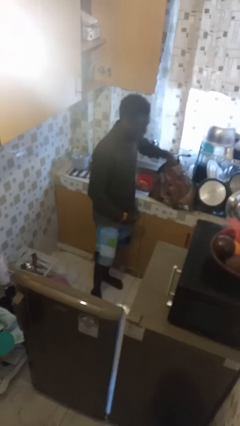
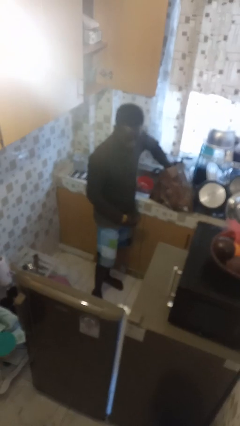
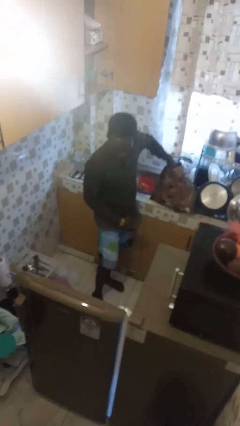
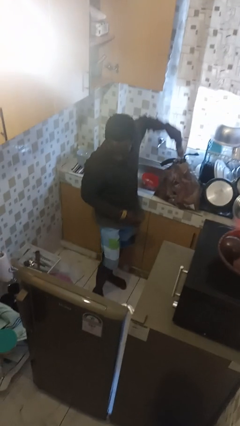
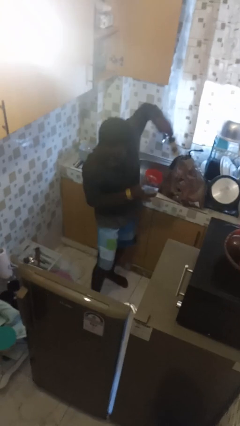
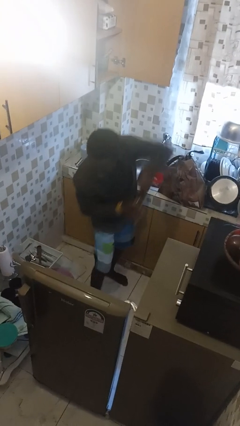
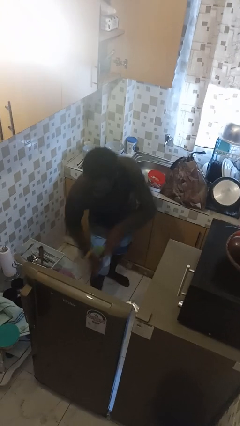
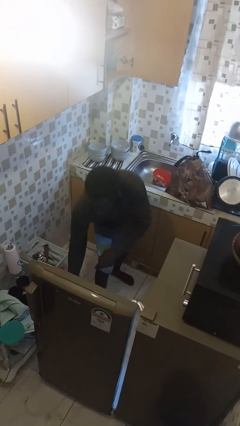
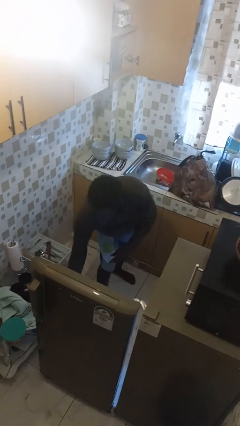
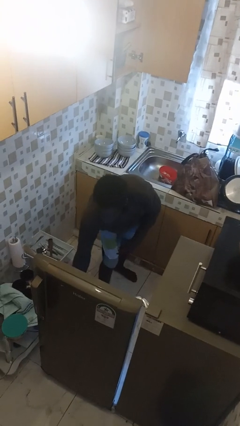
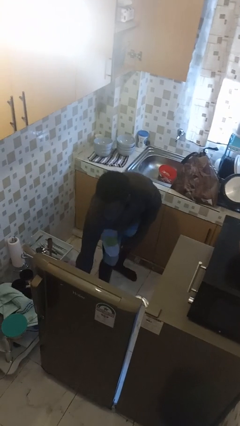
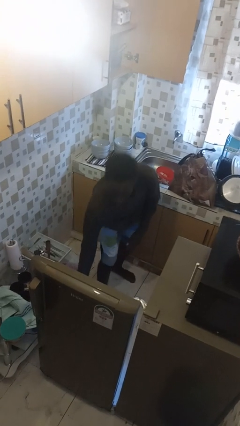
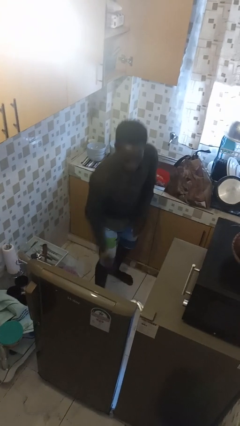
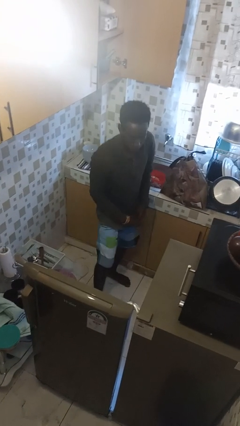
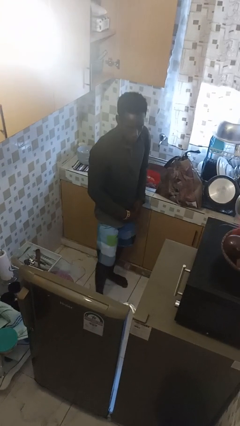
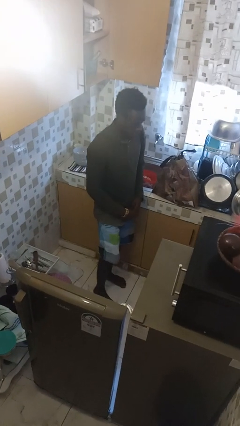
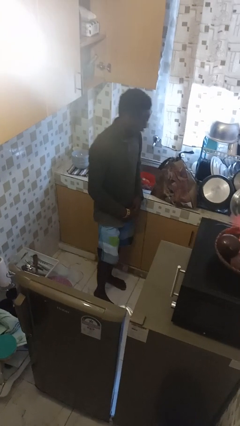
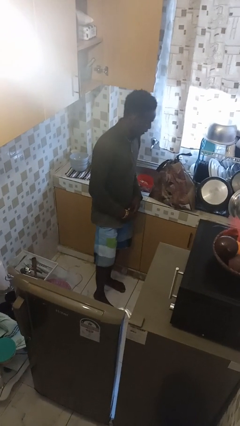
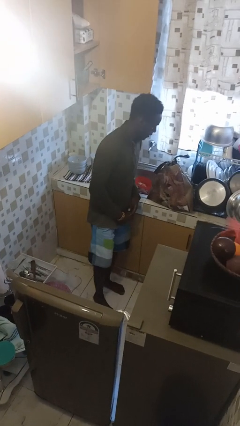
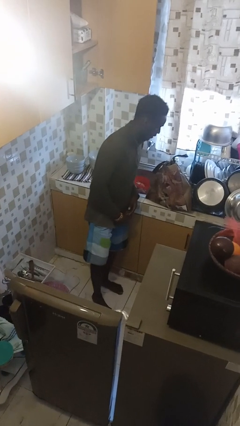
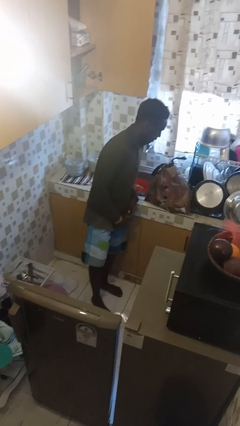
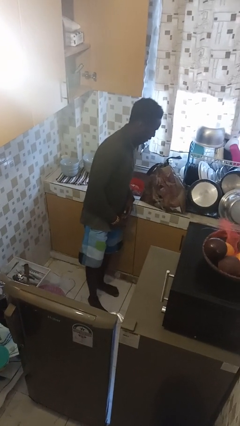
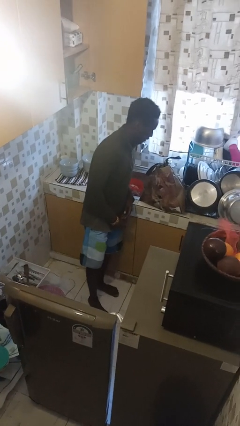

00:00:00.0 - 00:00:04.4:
person loads groceries into refrigerator

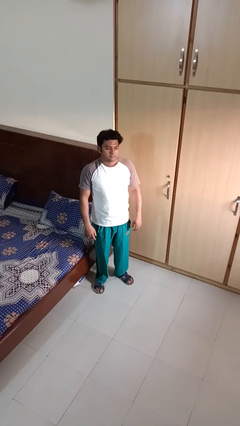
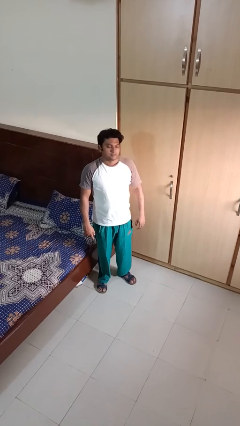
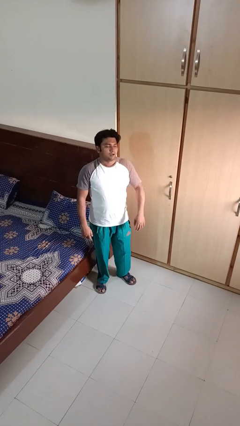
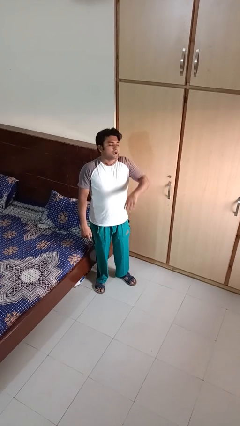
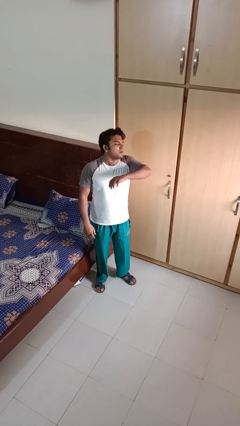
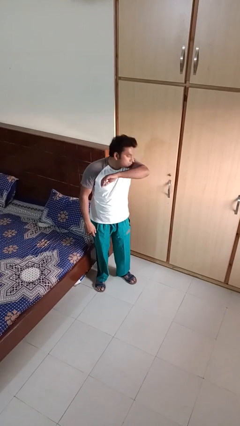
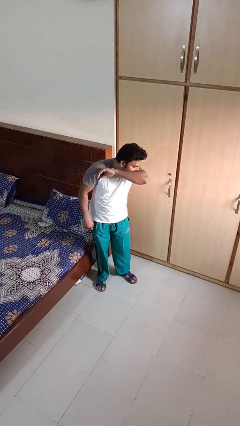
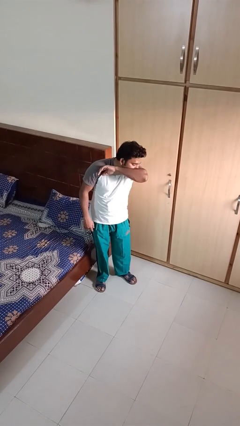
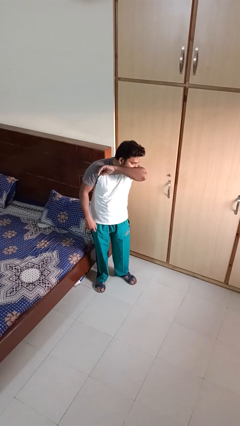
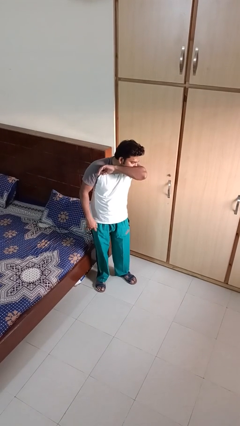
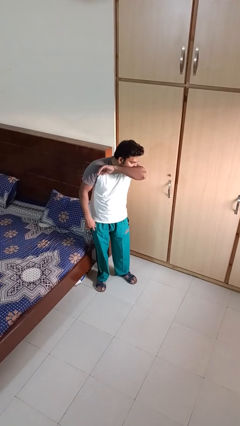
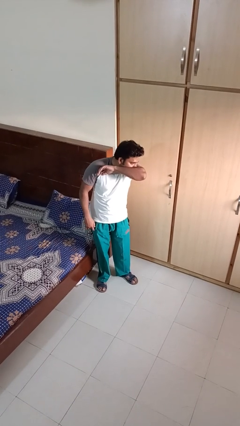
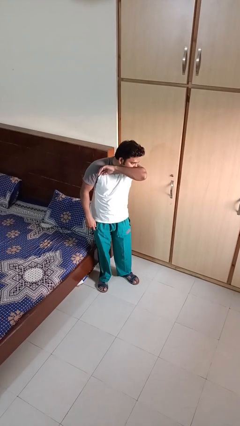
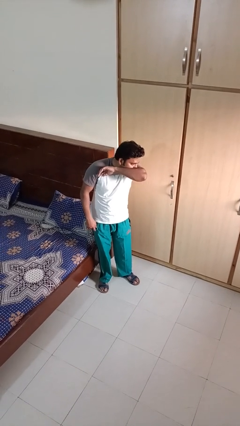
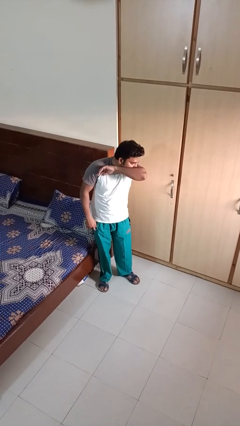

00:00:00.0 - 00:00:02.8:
person sneezes into arm

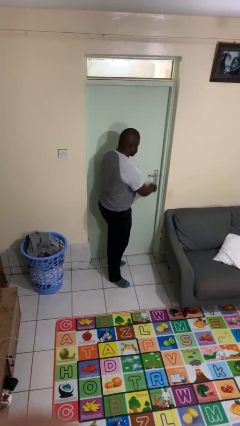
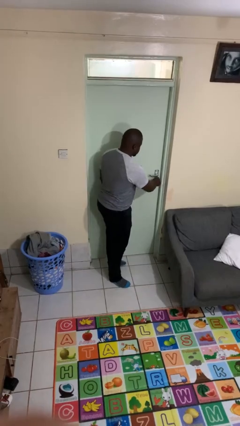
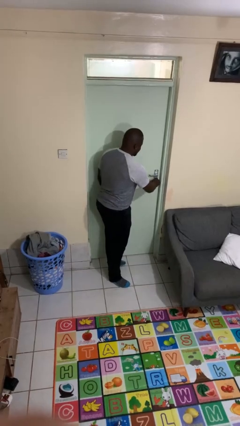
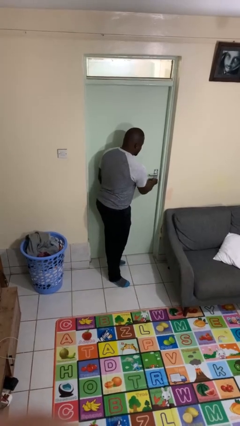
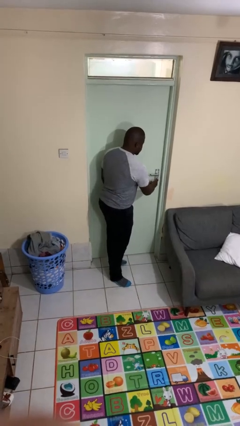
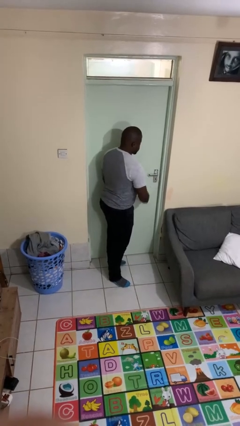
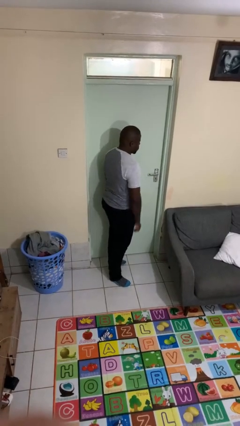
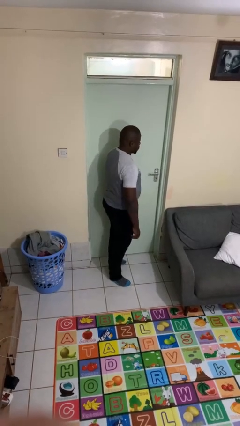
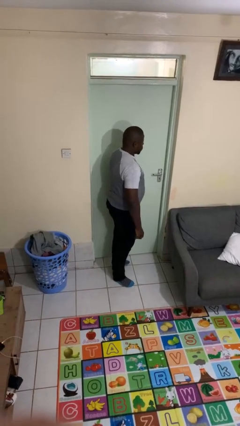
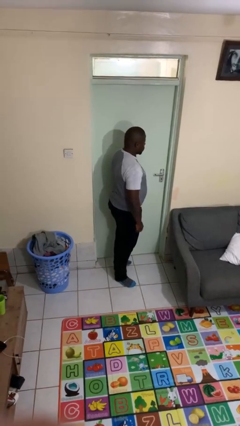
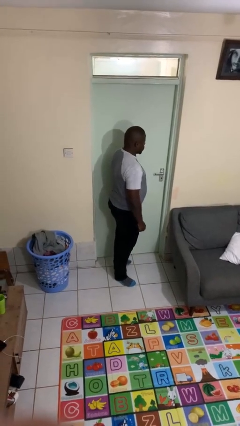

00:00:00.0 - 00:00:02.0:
person locks door with keys

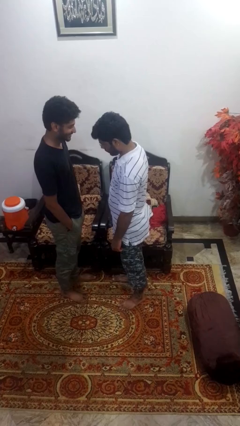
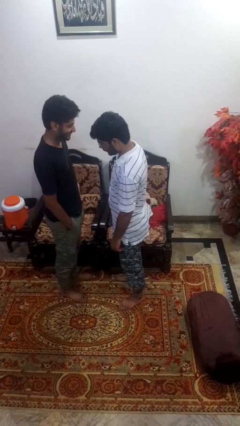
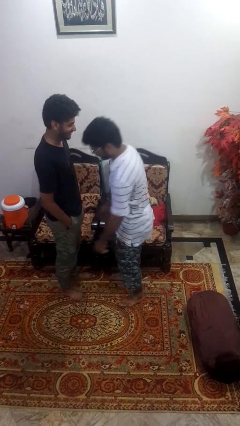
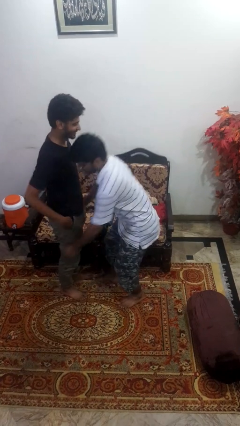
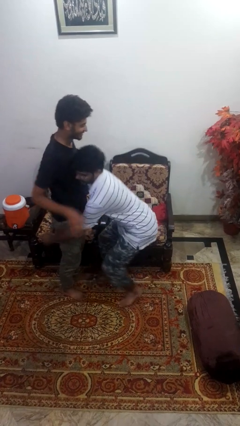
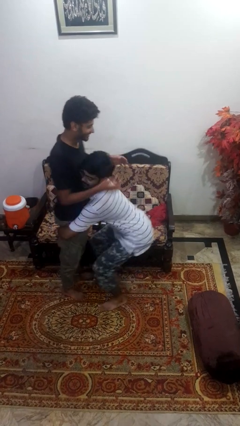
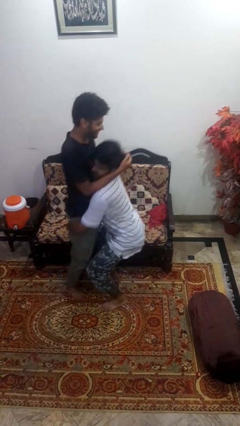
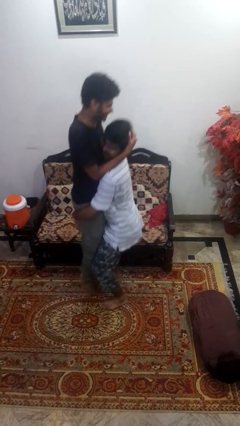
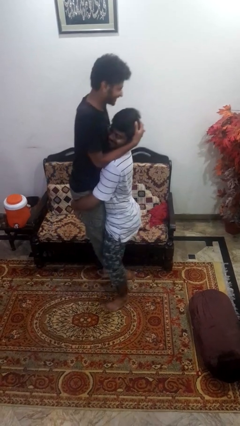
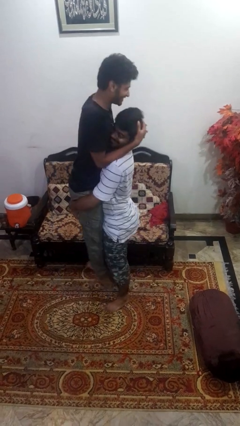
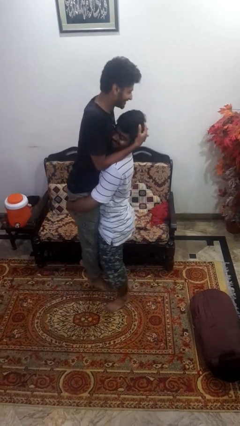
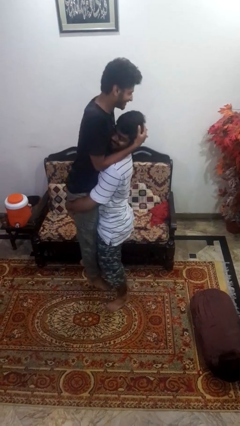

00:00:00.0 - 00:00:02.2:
person picks up person

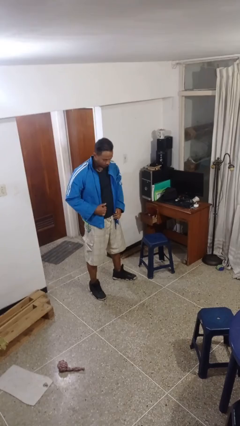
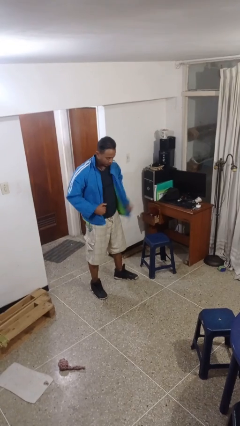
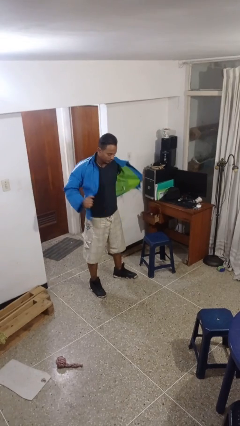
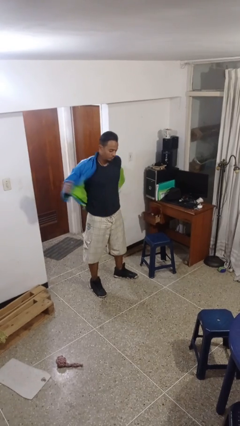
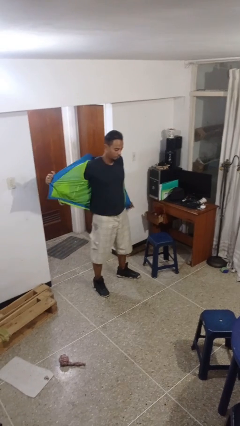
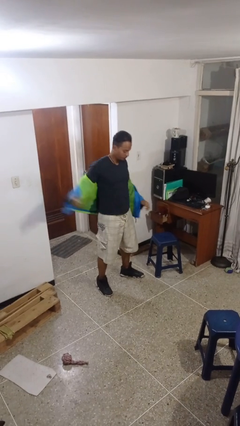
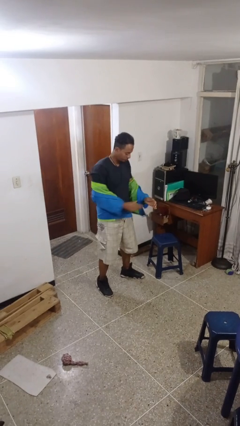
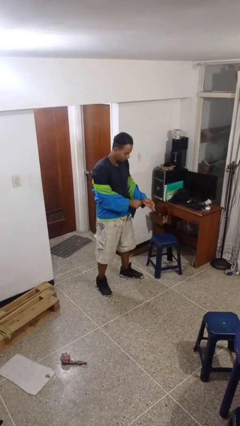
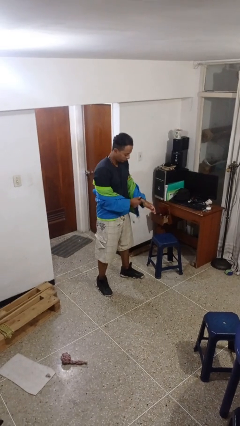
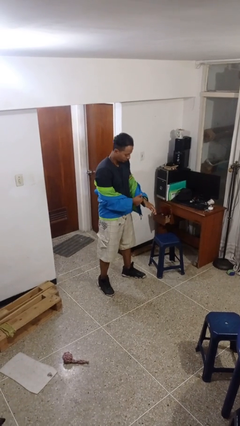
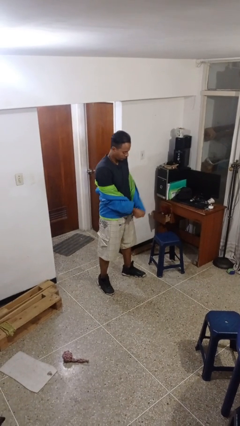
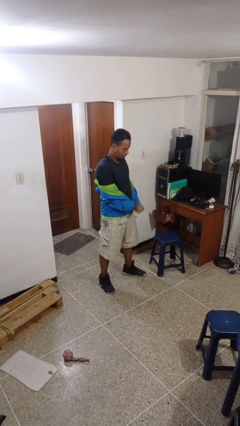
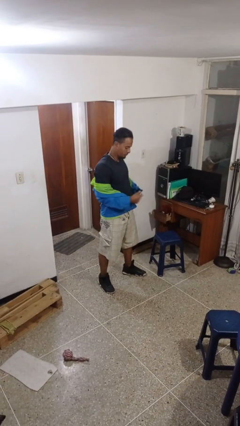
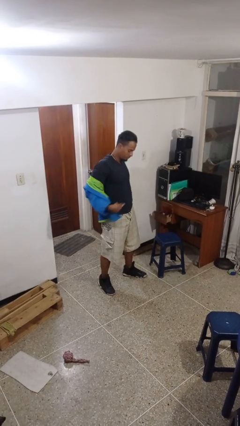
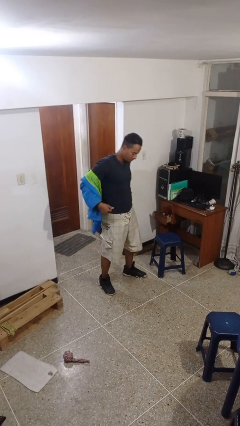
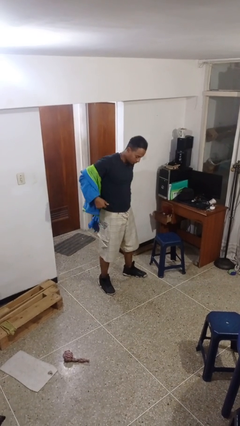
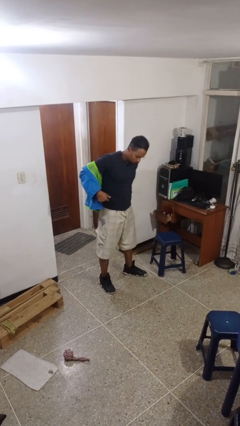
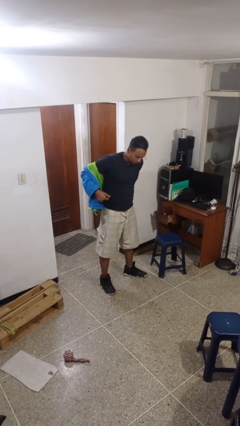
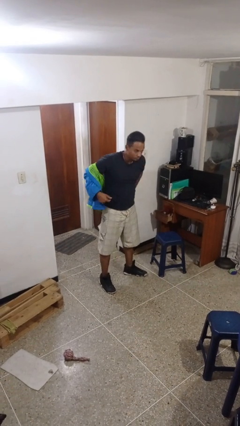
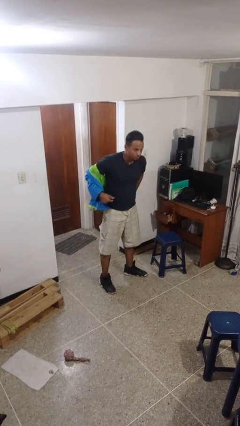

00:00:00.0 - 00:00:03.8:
person takes off jacket

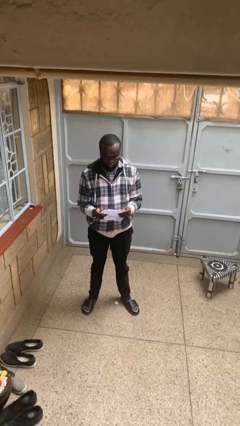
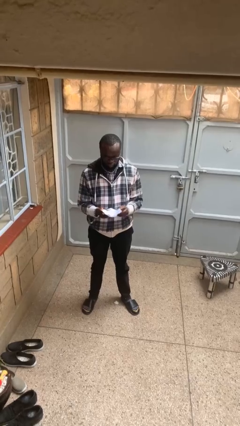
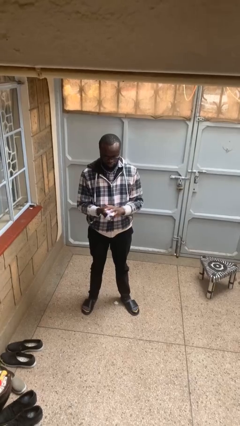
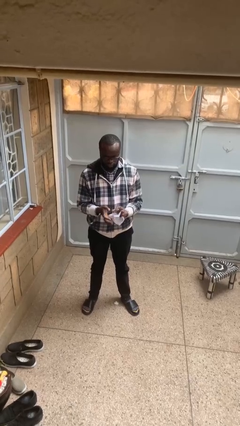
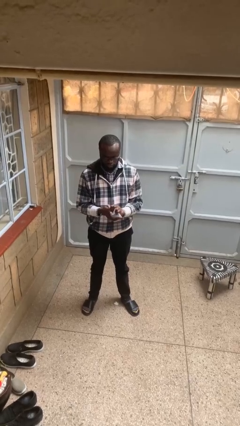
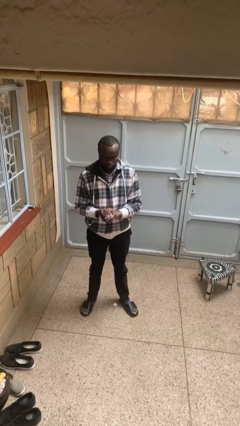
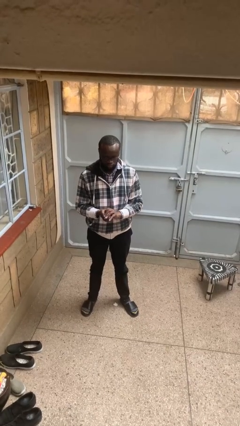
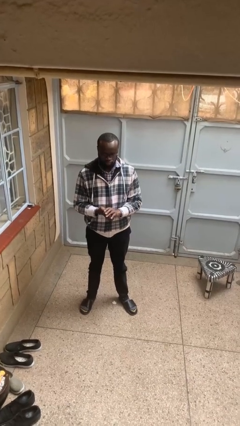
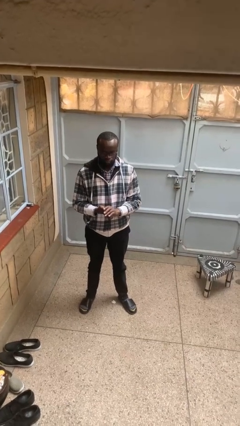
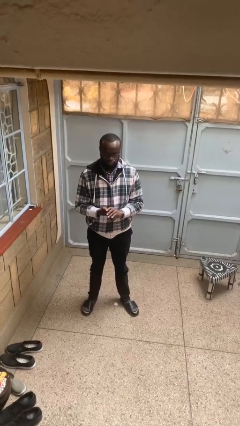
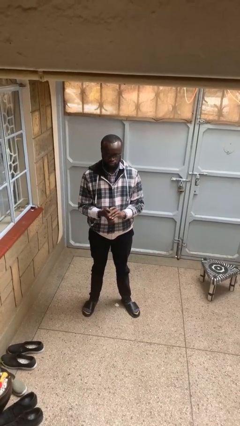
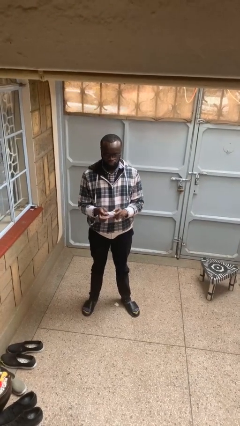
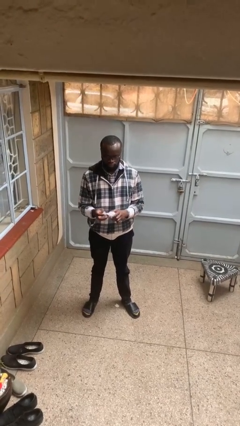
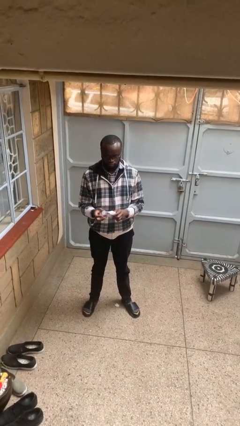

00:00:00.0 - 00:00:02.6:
person crumples paper
